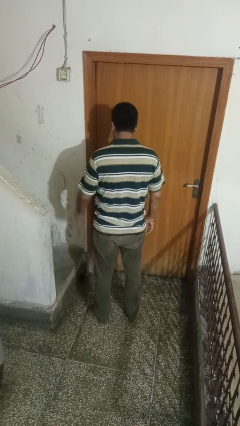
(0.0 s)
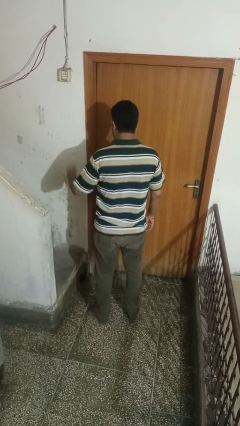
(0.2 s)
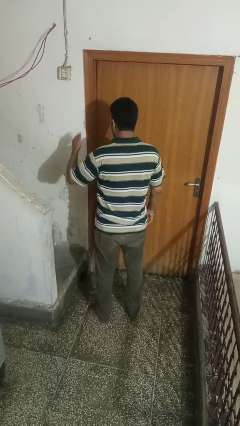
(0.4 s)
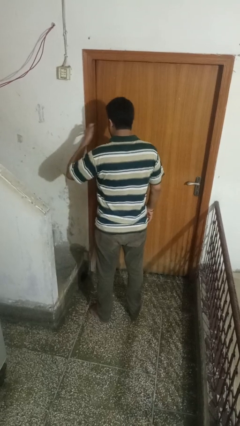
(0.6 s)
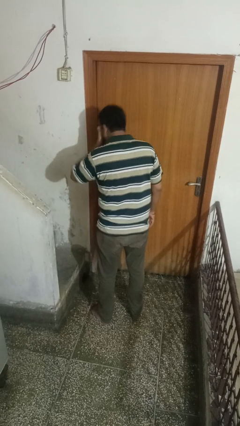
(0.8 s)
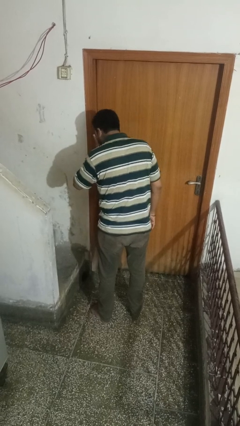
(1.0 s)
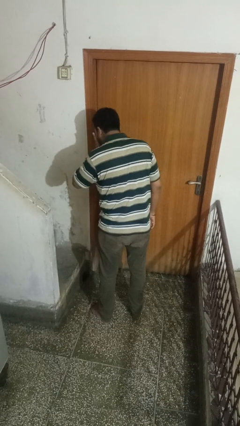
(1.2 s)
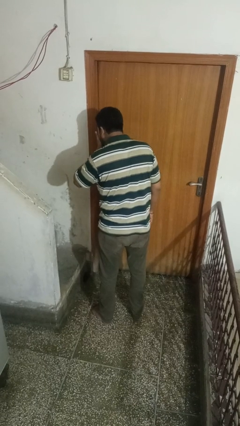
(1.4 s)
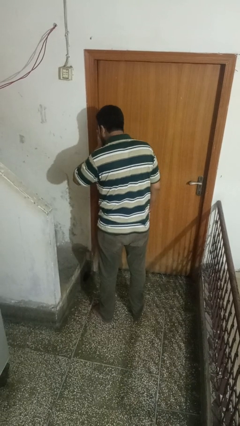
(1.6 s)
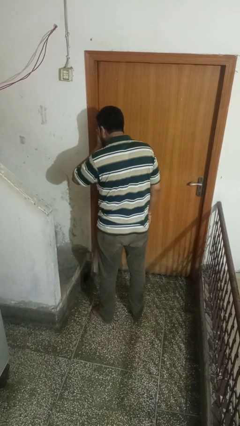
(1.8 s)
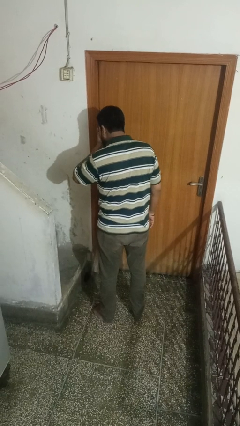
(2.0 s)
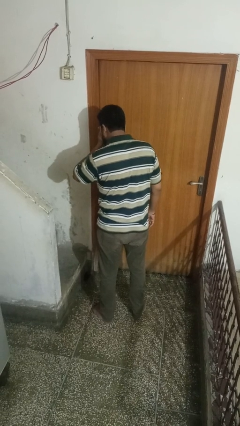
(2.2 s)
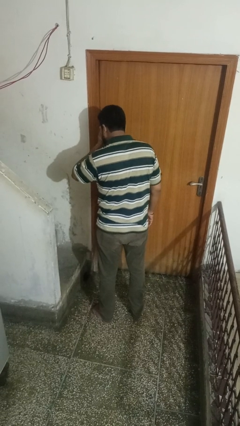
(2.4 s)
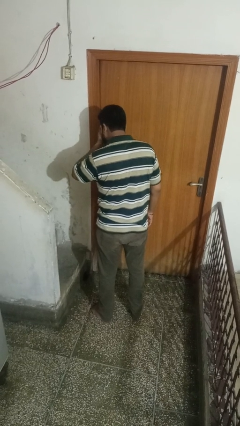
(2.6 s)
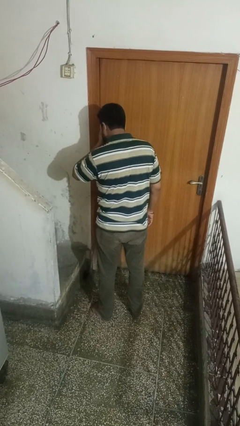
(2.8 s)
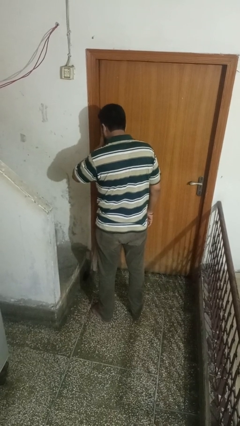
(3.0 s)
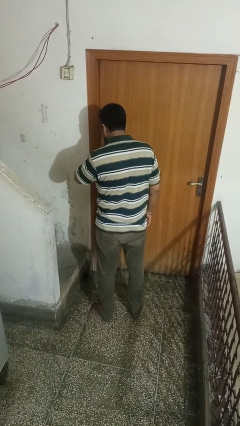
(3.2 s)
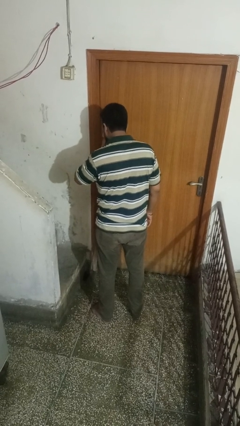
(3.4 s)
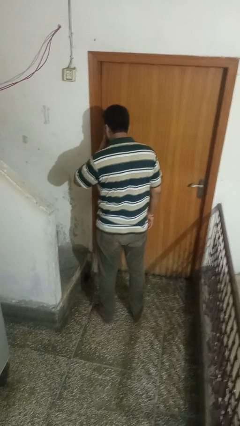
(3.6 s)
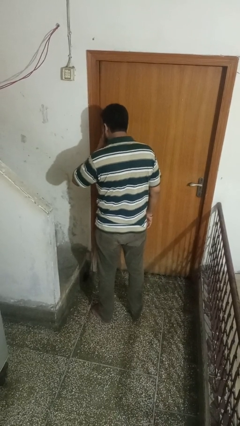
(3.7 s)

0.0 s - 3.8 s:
person sneezes into hand

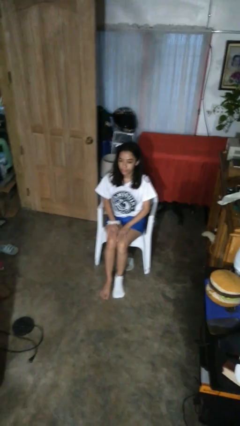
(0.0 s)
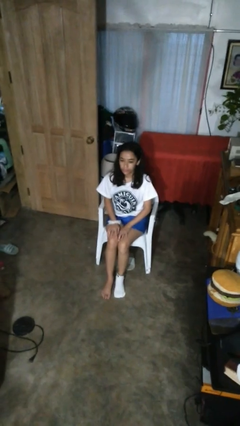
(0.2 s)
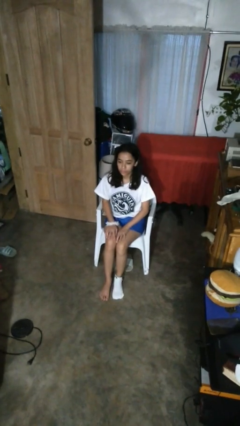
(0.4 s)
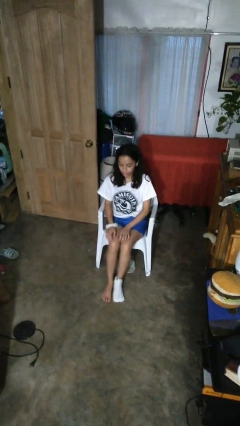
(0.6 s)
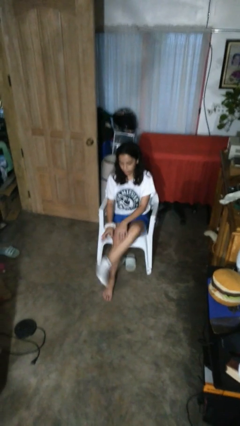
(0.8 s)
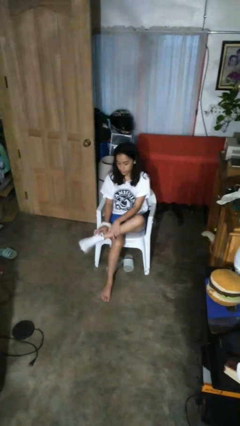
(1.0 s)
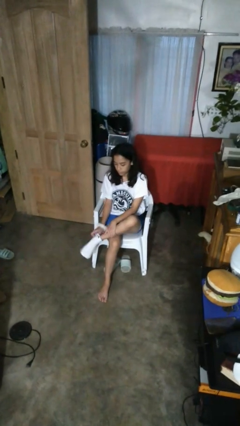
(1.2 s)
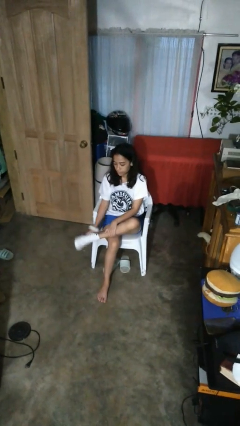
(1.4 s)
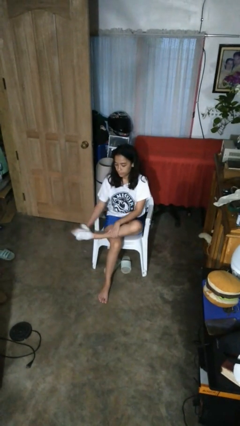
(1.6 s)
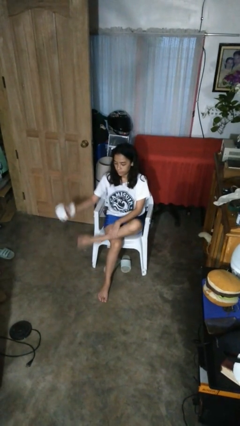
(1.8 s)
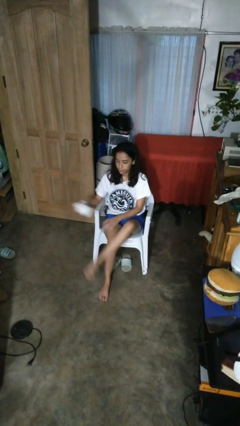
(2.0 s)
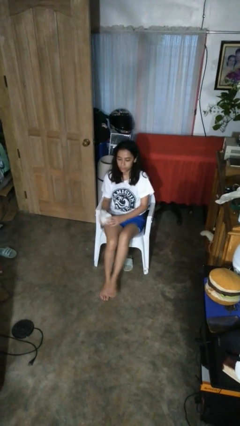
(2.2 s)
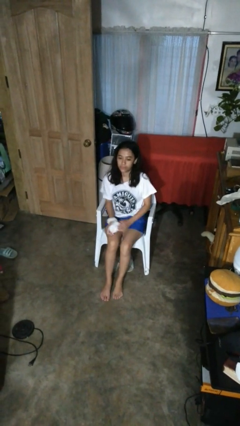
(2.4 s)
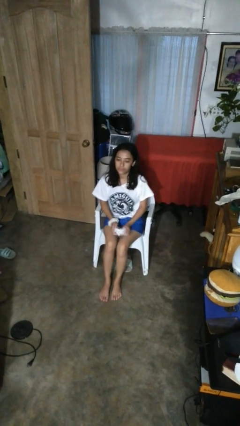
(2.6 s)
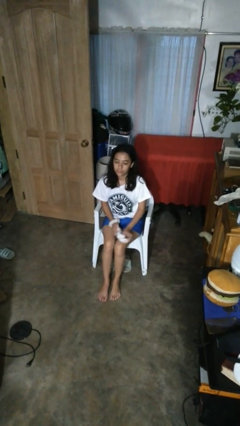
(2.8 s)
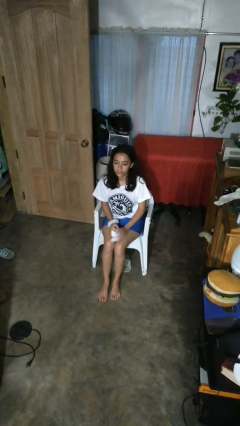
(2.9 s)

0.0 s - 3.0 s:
person takes off socks

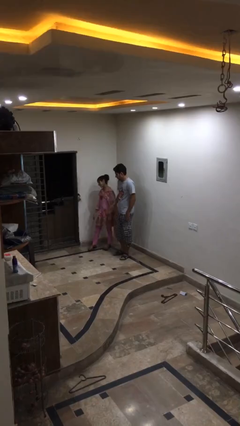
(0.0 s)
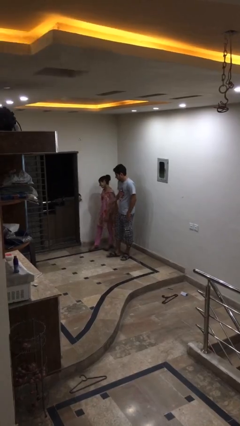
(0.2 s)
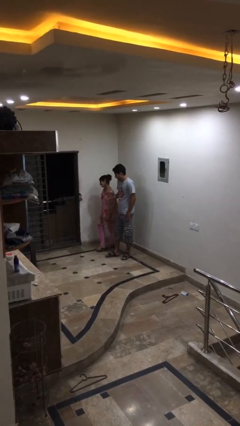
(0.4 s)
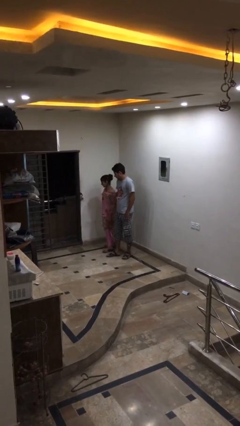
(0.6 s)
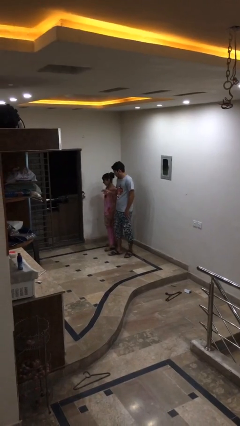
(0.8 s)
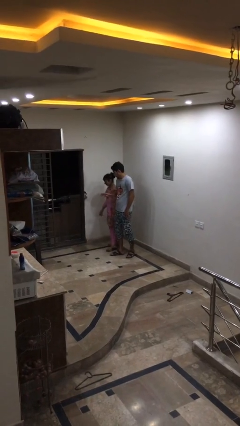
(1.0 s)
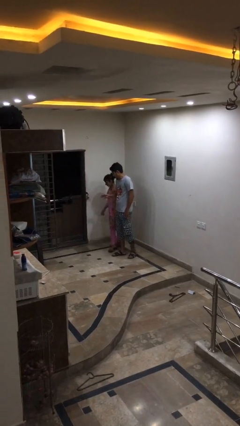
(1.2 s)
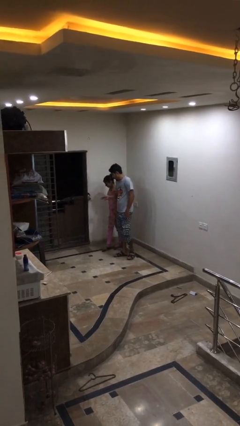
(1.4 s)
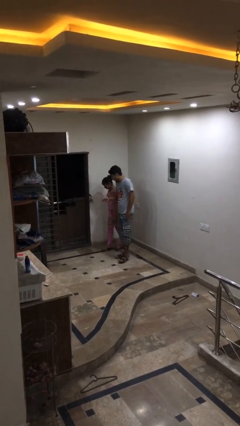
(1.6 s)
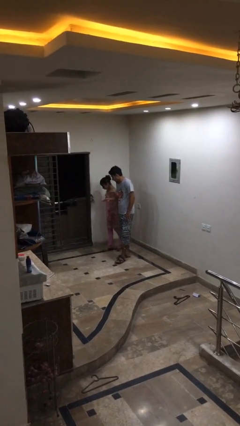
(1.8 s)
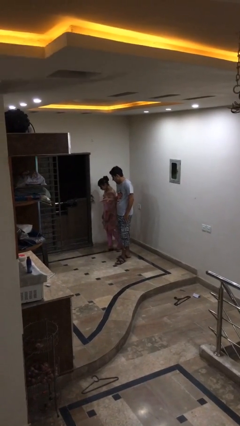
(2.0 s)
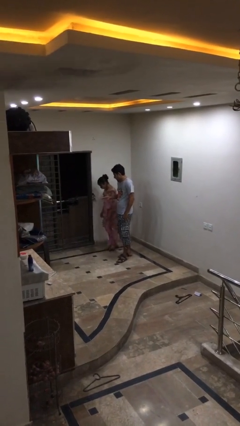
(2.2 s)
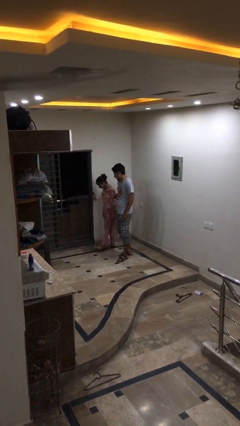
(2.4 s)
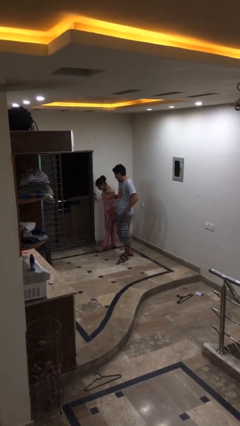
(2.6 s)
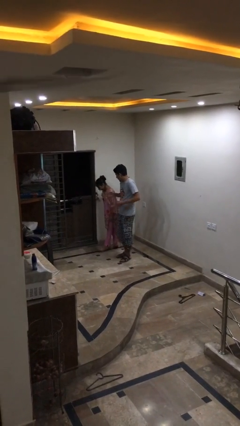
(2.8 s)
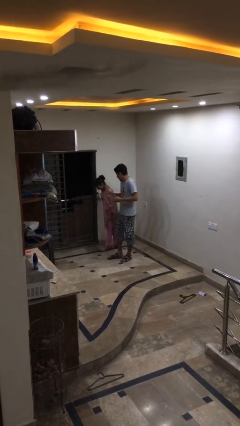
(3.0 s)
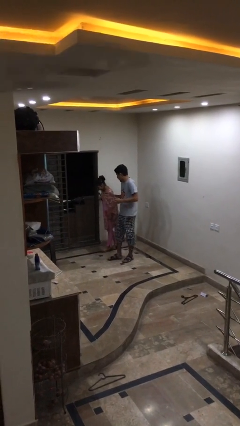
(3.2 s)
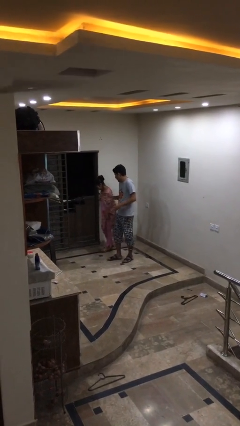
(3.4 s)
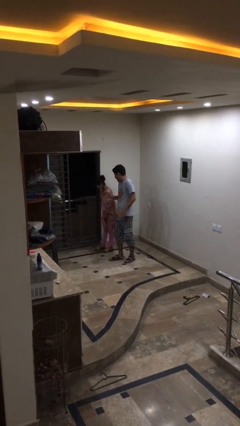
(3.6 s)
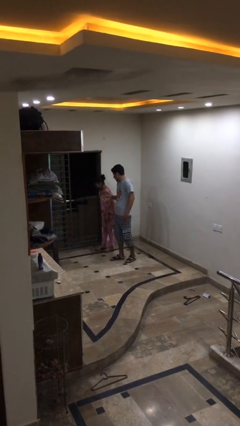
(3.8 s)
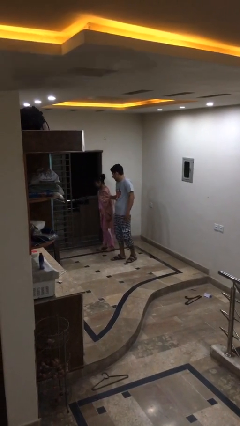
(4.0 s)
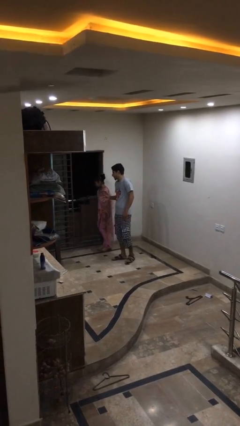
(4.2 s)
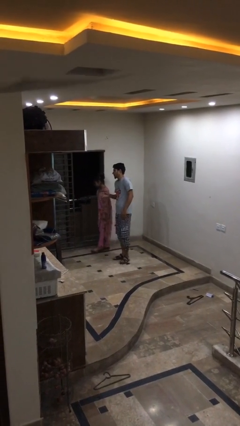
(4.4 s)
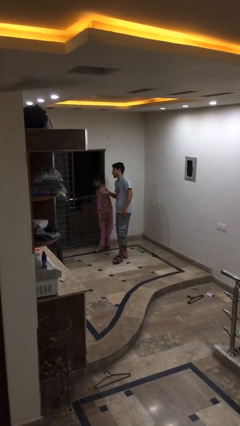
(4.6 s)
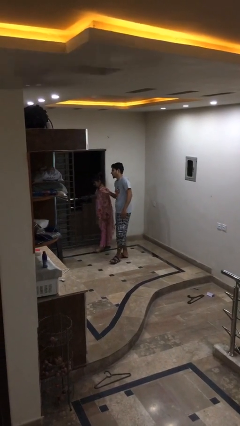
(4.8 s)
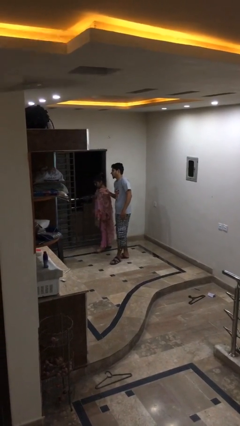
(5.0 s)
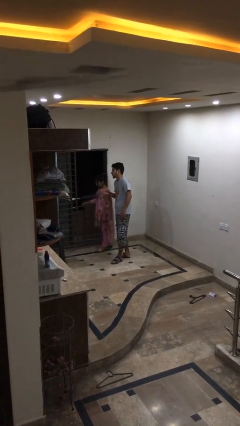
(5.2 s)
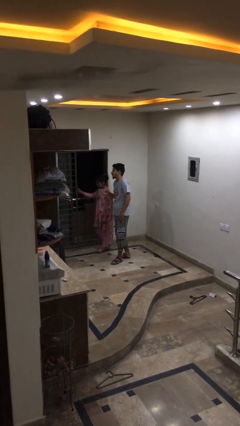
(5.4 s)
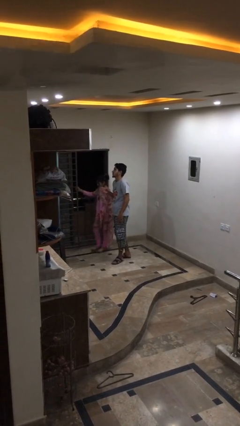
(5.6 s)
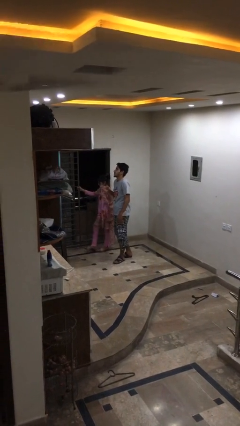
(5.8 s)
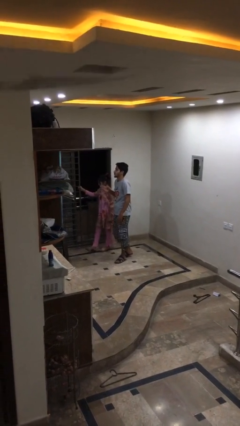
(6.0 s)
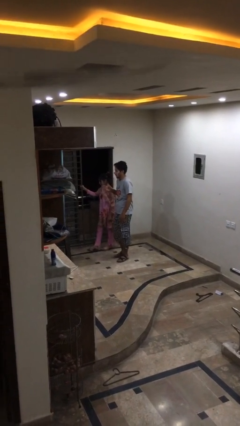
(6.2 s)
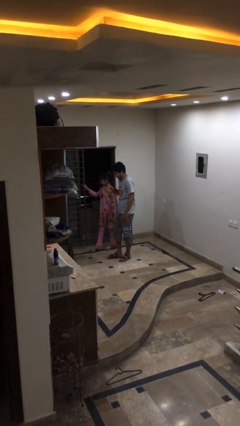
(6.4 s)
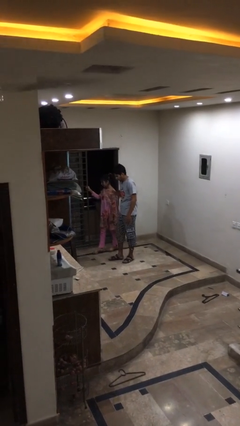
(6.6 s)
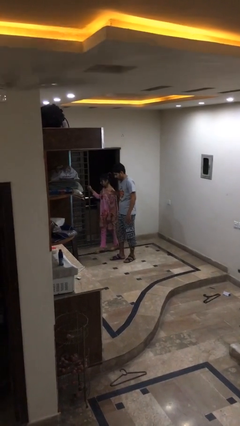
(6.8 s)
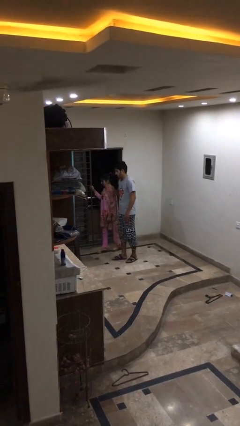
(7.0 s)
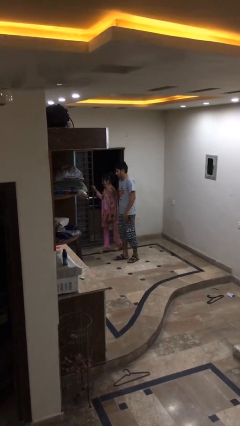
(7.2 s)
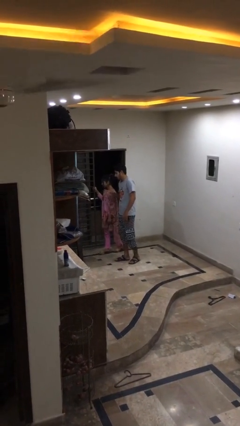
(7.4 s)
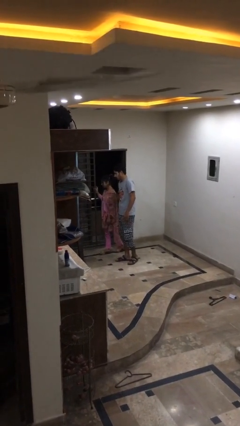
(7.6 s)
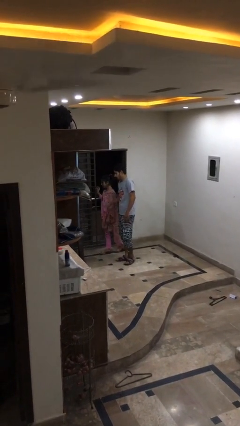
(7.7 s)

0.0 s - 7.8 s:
person talks to person

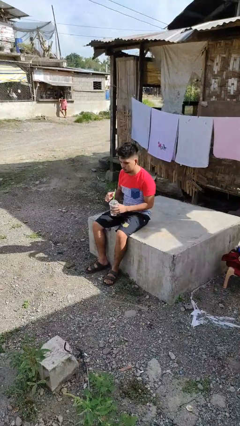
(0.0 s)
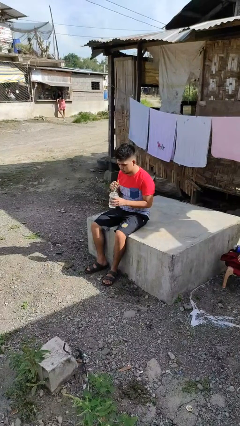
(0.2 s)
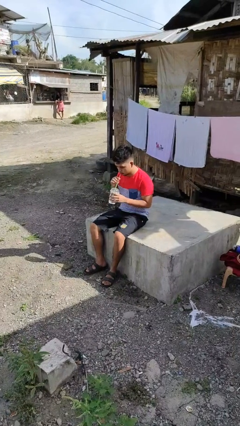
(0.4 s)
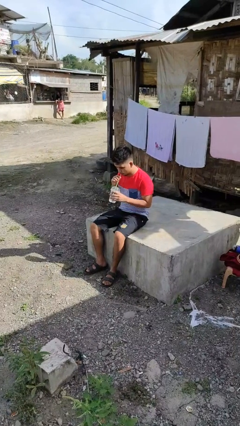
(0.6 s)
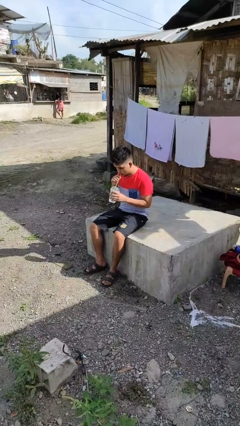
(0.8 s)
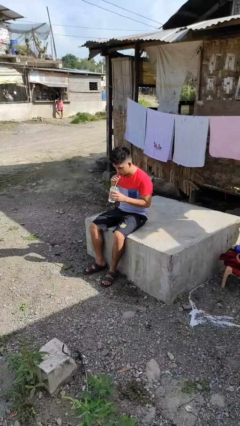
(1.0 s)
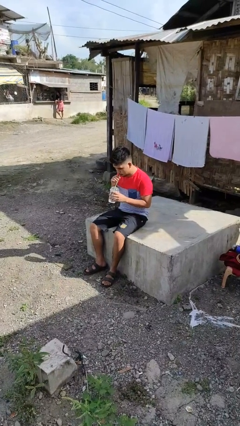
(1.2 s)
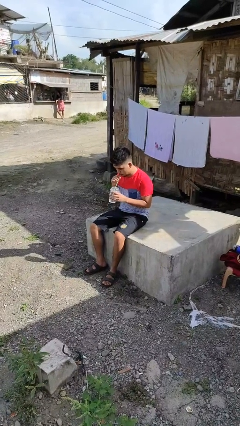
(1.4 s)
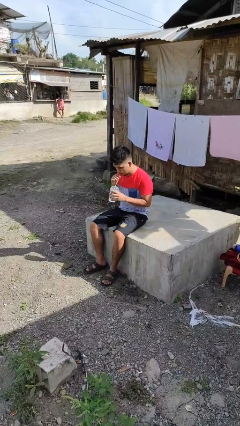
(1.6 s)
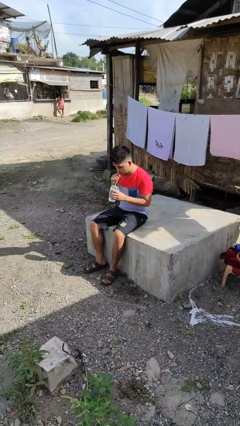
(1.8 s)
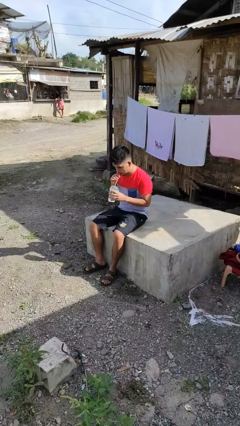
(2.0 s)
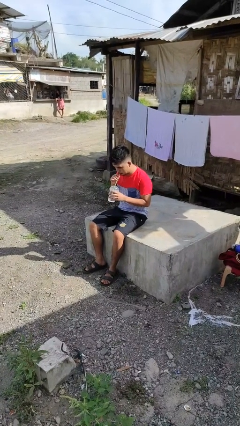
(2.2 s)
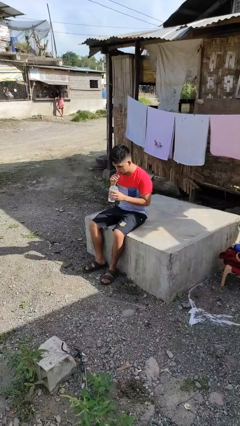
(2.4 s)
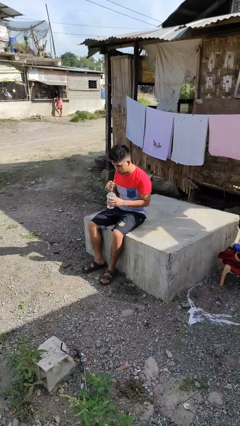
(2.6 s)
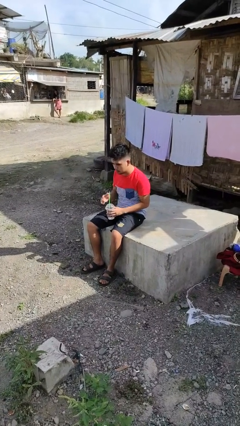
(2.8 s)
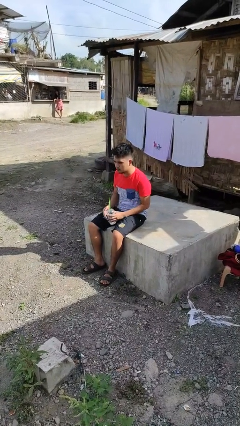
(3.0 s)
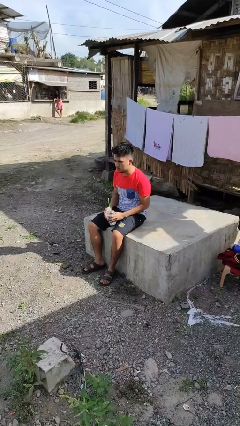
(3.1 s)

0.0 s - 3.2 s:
person drinks from straw

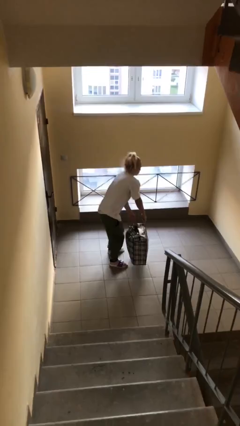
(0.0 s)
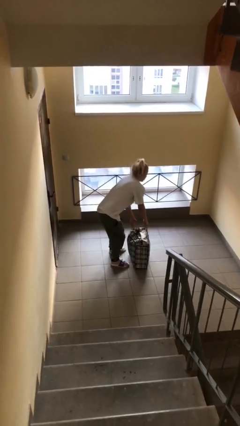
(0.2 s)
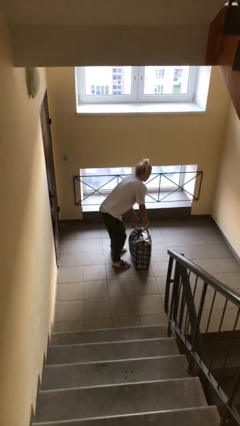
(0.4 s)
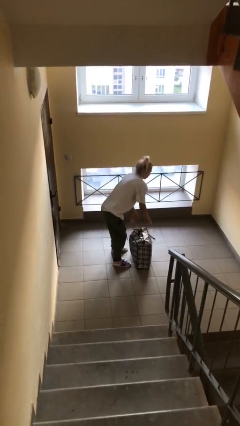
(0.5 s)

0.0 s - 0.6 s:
person puts down object on floor
